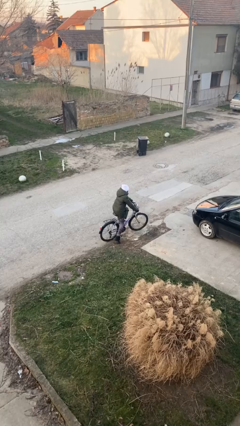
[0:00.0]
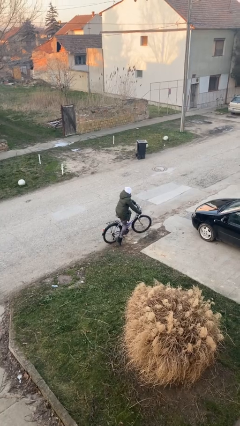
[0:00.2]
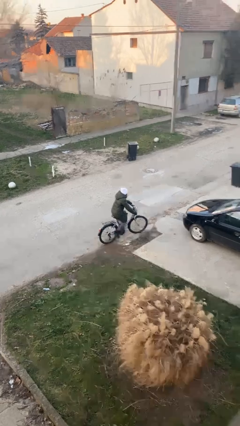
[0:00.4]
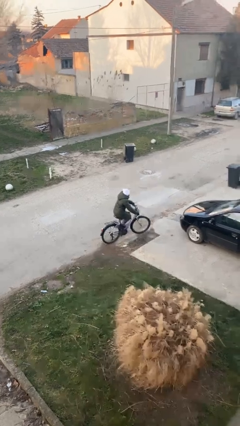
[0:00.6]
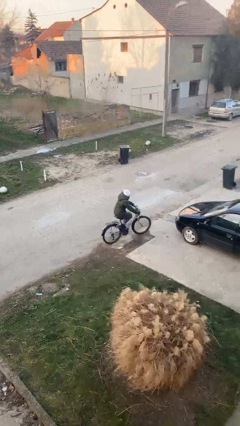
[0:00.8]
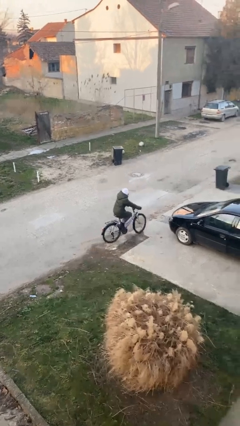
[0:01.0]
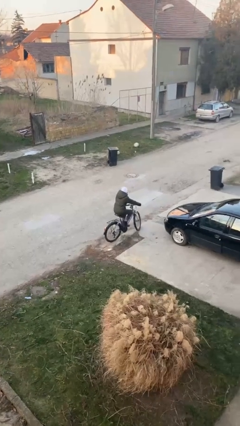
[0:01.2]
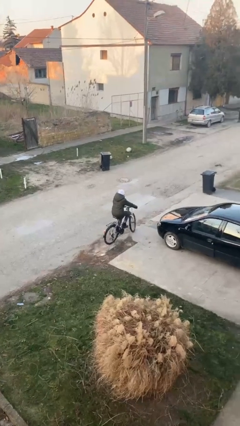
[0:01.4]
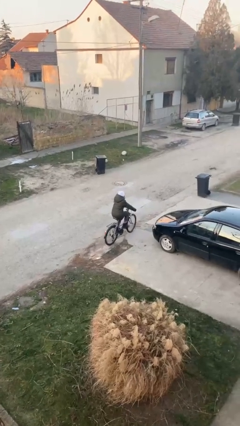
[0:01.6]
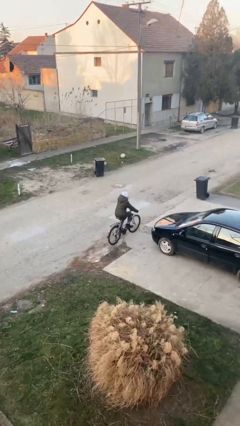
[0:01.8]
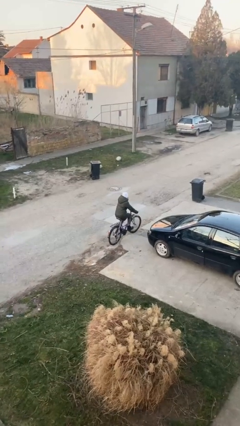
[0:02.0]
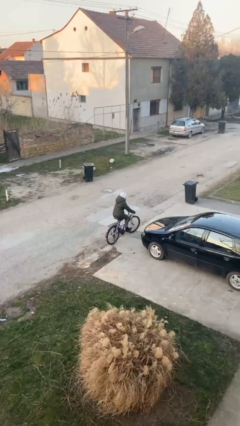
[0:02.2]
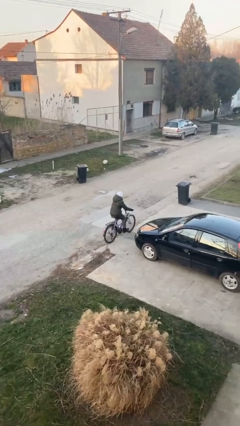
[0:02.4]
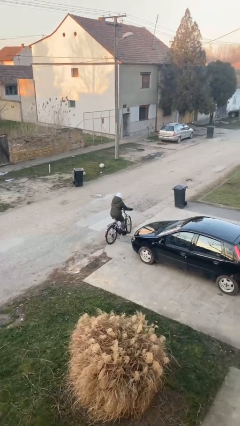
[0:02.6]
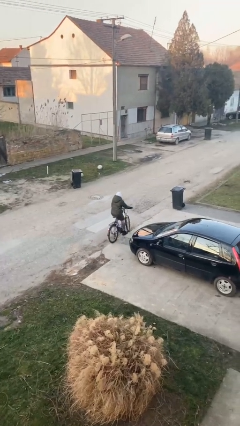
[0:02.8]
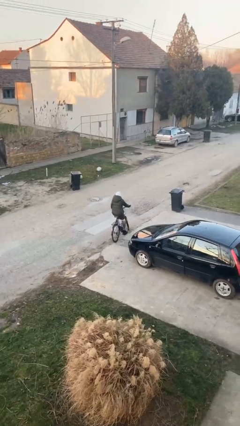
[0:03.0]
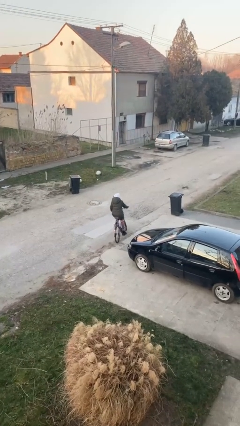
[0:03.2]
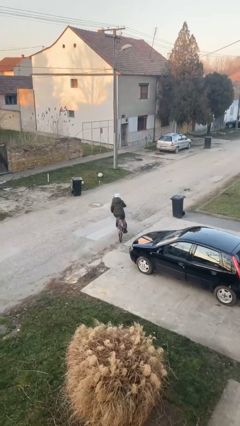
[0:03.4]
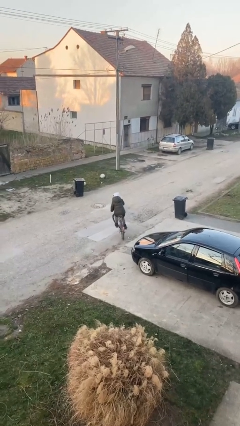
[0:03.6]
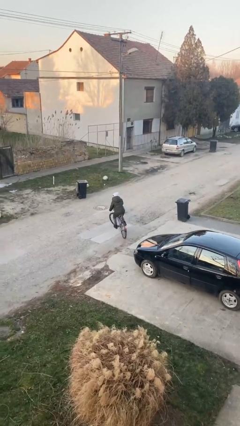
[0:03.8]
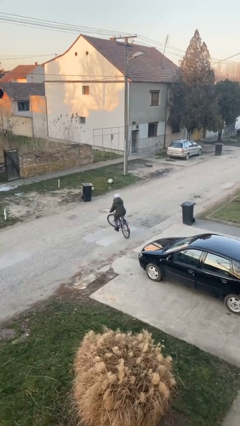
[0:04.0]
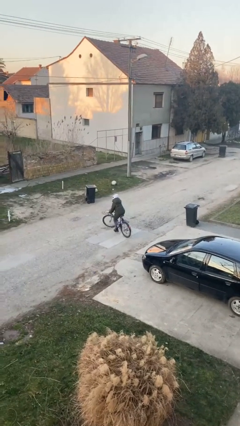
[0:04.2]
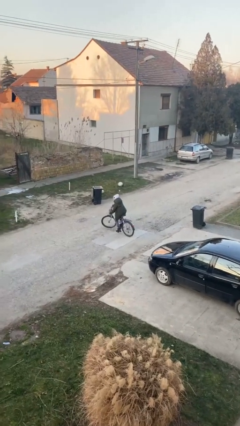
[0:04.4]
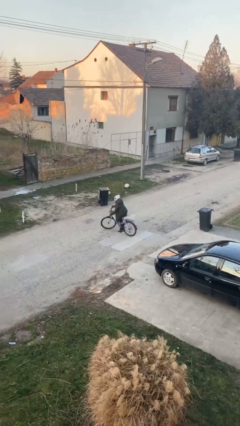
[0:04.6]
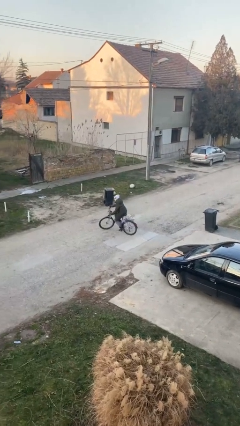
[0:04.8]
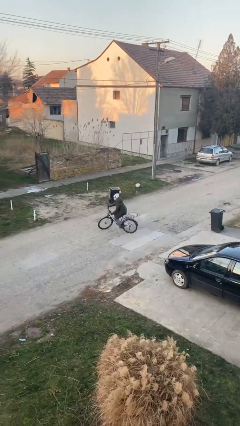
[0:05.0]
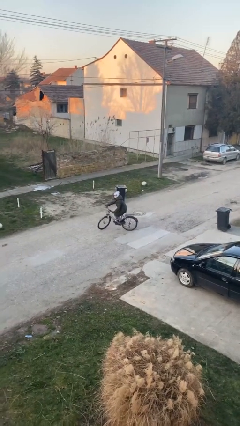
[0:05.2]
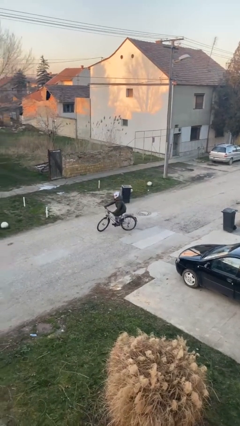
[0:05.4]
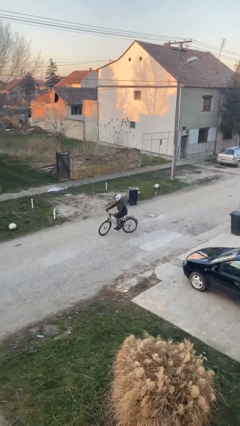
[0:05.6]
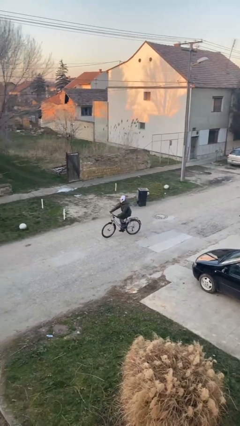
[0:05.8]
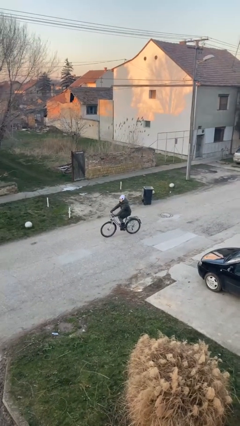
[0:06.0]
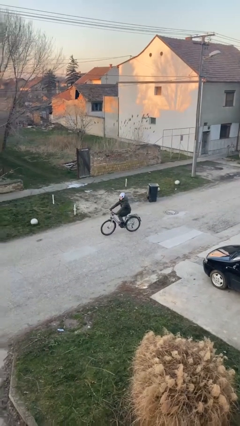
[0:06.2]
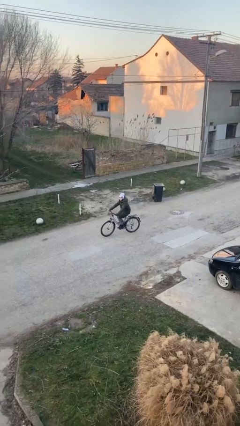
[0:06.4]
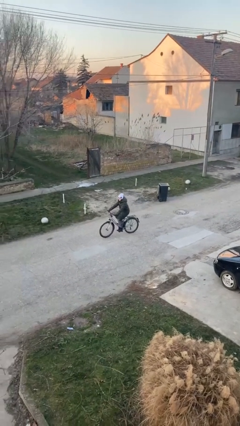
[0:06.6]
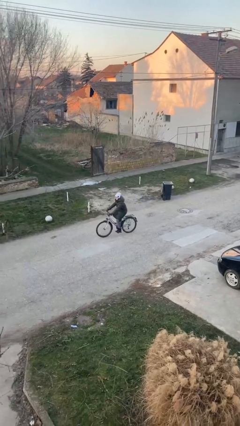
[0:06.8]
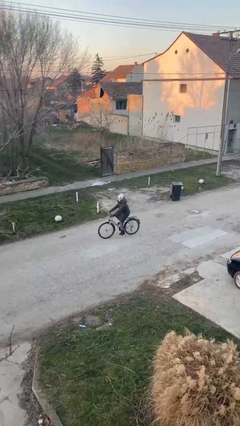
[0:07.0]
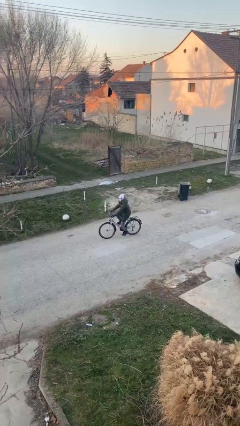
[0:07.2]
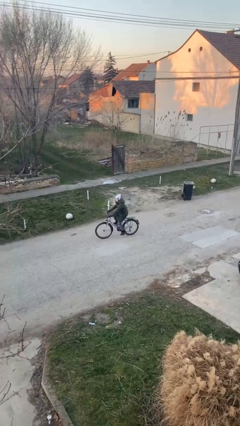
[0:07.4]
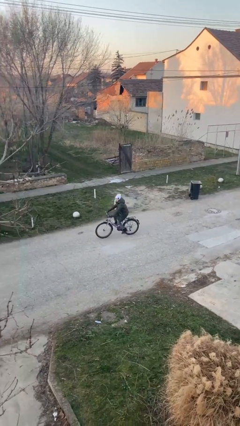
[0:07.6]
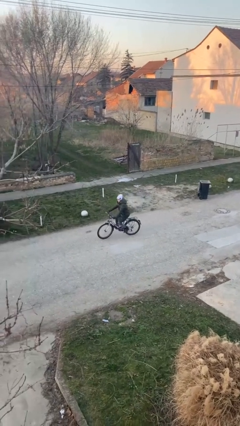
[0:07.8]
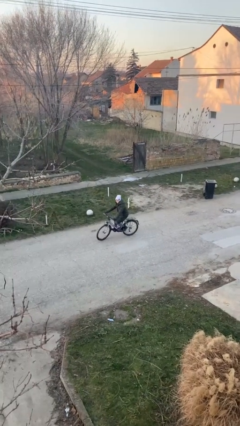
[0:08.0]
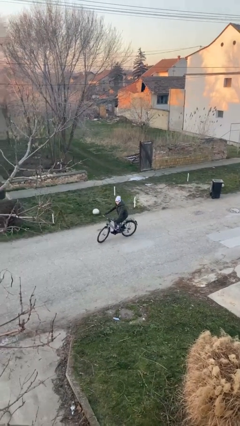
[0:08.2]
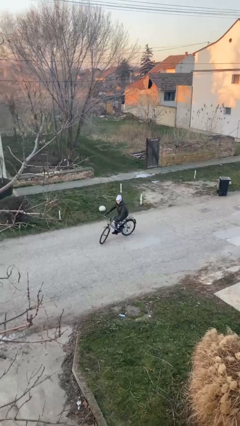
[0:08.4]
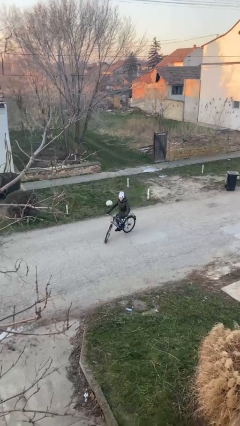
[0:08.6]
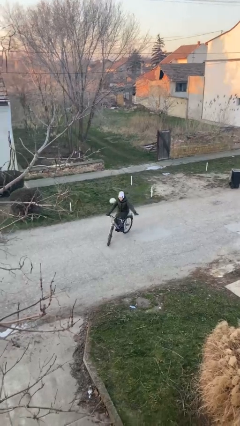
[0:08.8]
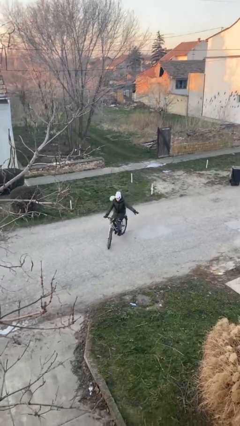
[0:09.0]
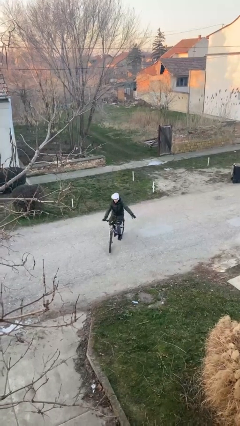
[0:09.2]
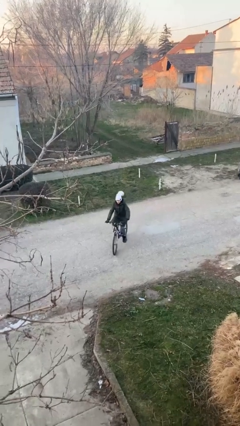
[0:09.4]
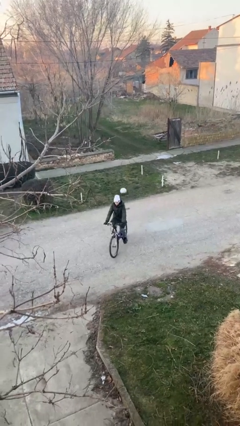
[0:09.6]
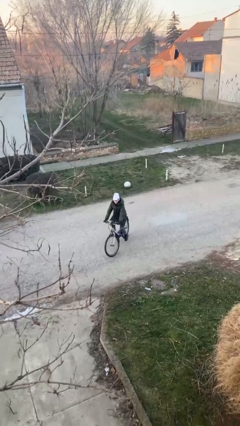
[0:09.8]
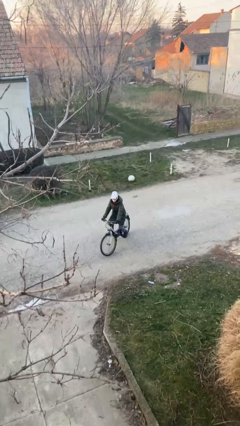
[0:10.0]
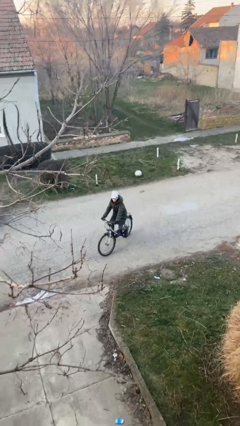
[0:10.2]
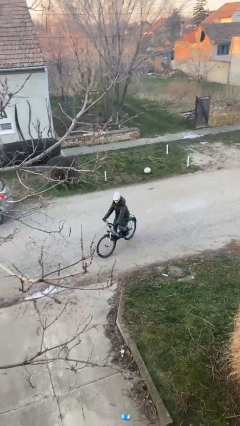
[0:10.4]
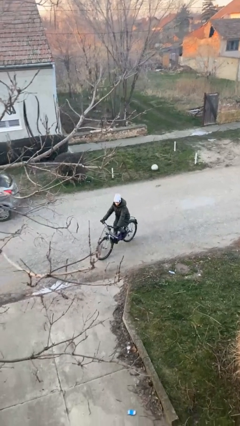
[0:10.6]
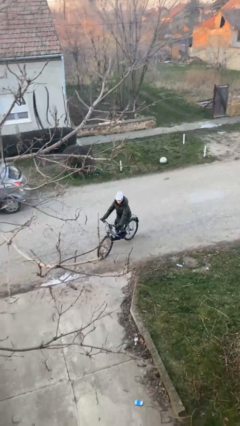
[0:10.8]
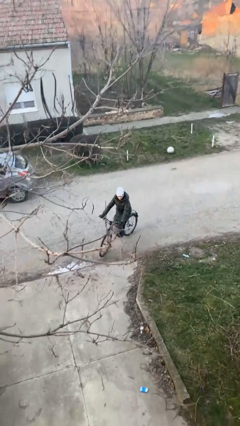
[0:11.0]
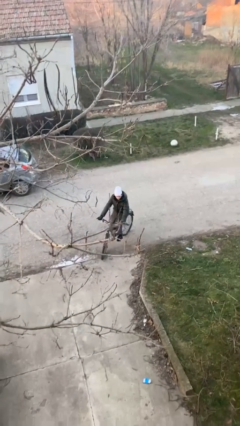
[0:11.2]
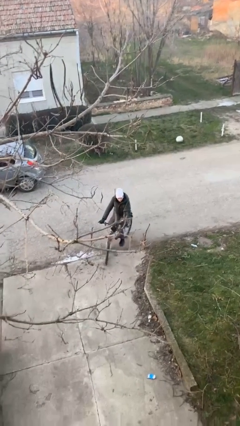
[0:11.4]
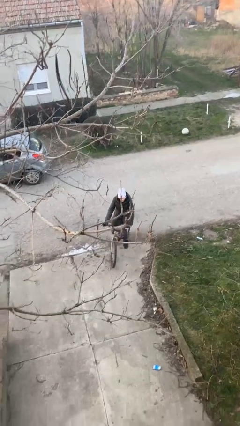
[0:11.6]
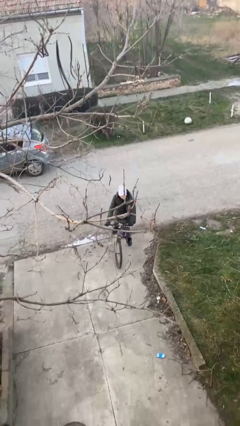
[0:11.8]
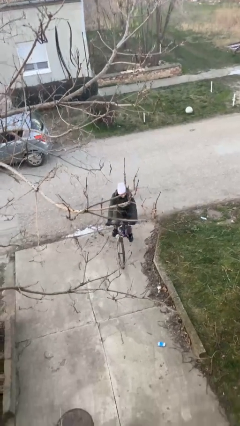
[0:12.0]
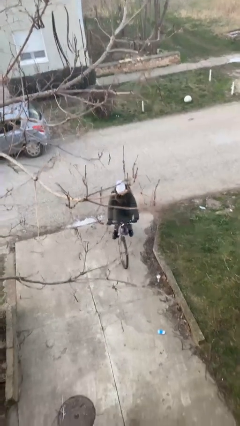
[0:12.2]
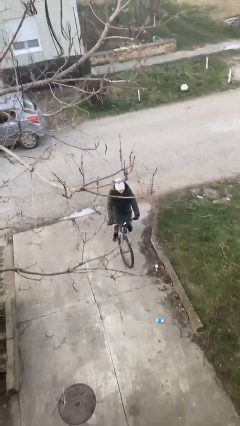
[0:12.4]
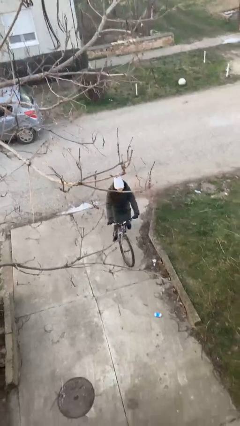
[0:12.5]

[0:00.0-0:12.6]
person rides bicycle

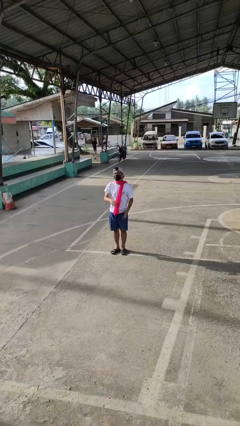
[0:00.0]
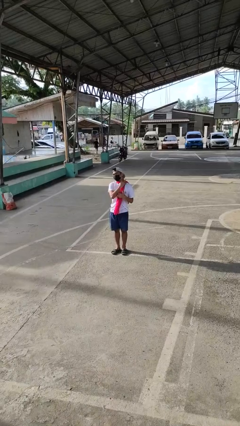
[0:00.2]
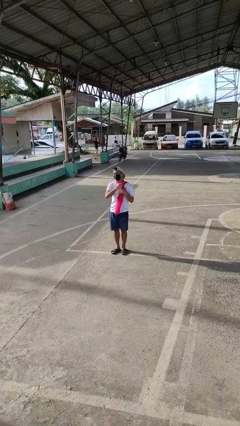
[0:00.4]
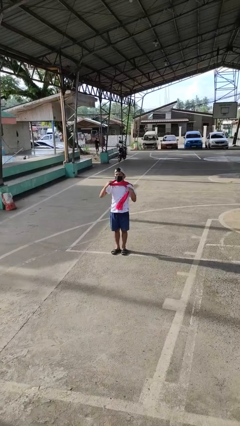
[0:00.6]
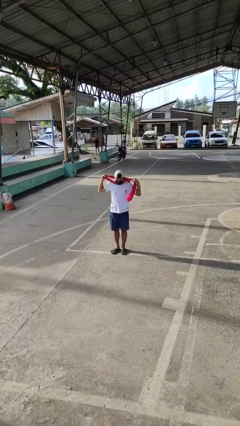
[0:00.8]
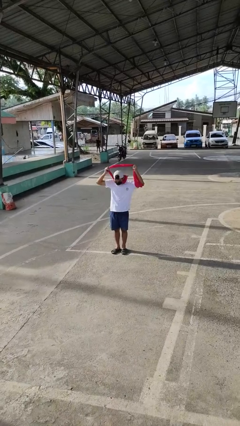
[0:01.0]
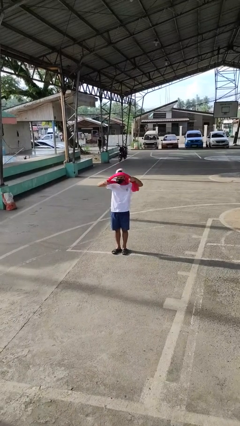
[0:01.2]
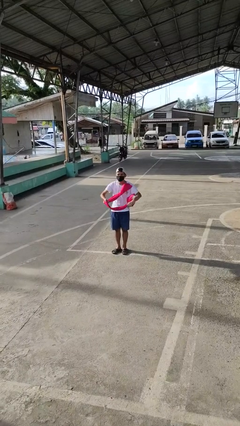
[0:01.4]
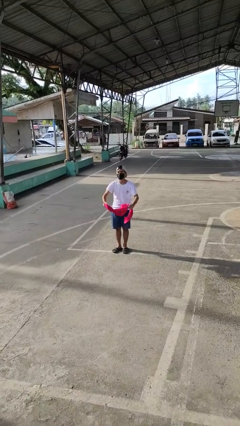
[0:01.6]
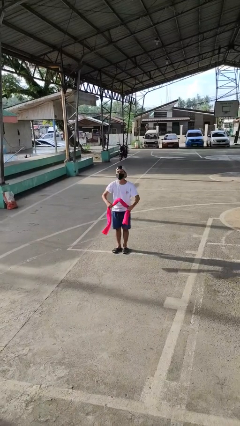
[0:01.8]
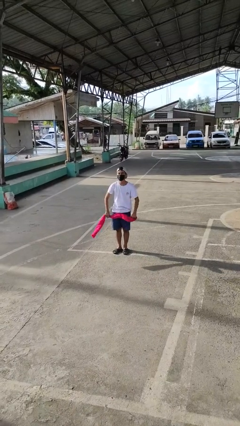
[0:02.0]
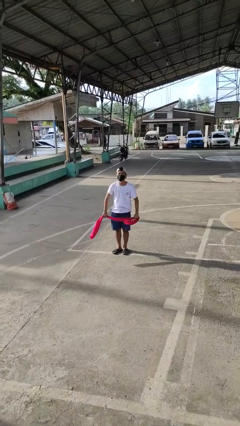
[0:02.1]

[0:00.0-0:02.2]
person takes off scarf

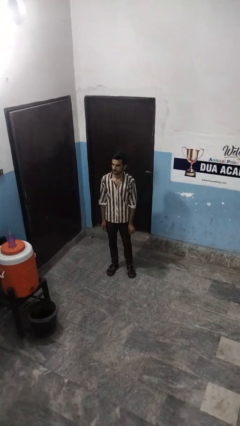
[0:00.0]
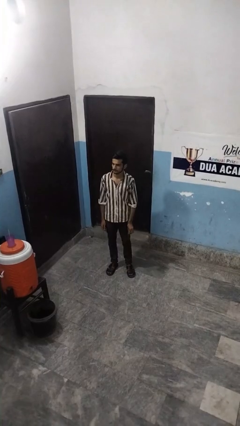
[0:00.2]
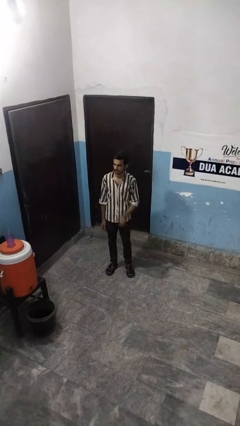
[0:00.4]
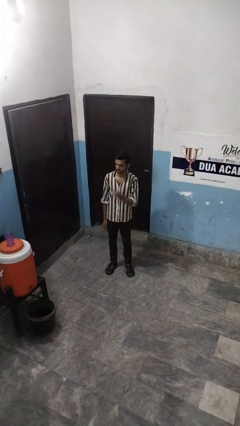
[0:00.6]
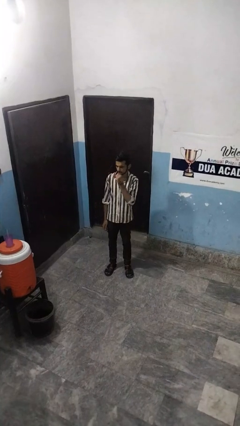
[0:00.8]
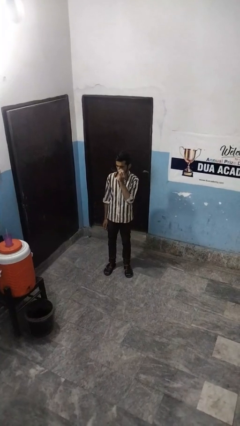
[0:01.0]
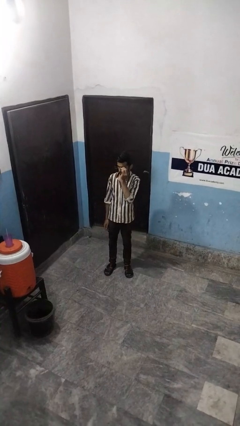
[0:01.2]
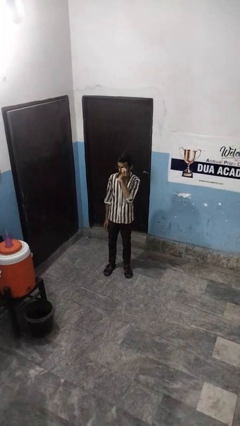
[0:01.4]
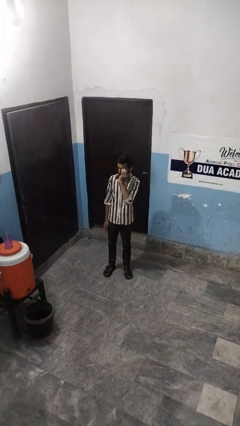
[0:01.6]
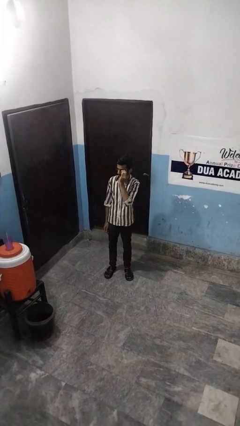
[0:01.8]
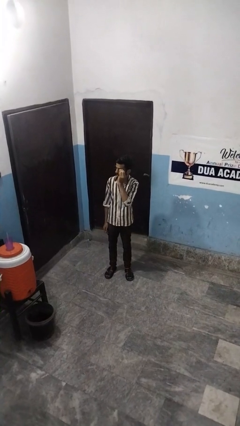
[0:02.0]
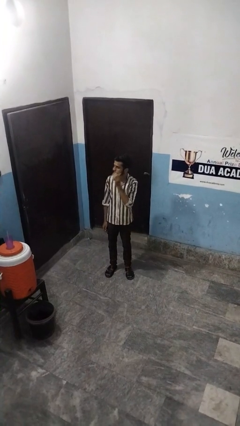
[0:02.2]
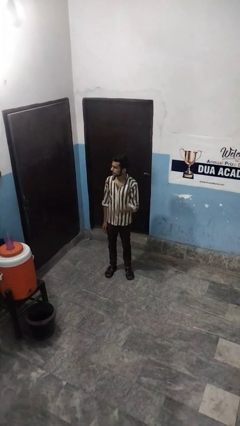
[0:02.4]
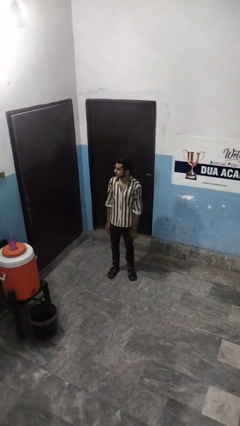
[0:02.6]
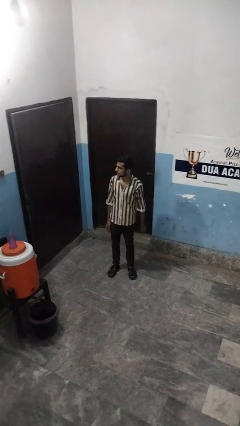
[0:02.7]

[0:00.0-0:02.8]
person puts on glasses

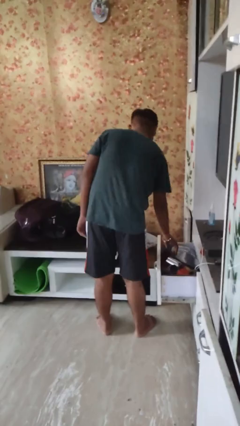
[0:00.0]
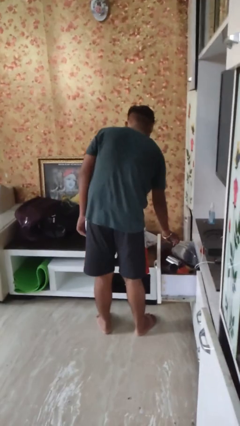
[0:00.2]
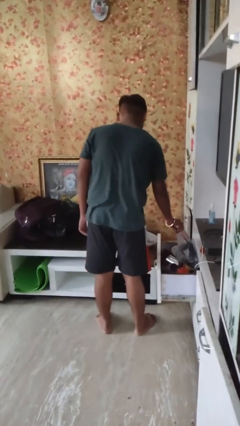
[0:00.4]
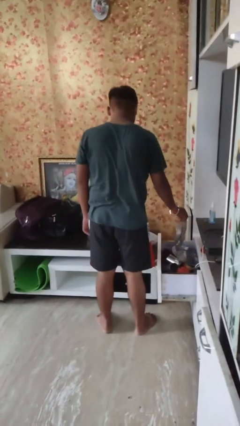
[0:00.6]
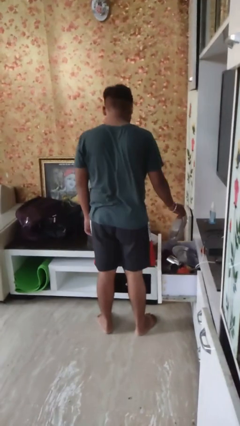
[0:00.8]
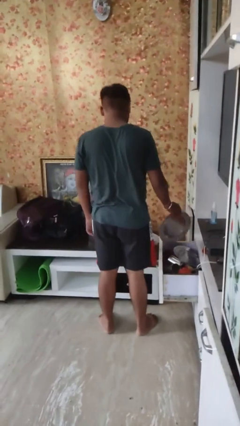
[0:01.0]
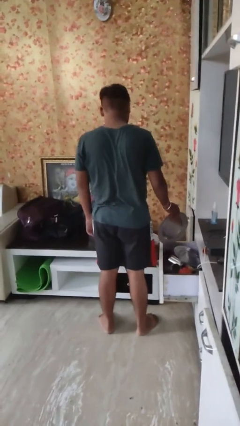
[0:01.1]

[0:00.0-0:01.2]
person takes object from kitchen drawer
